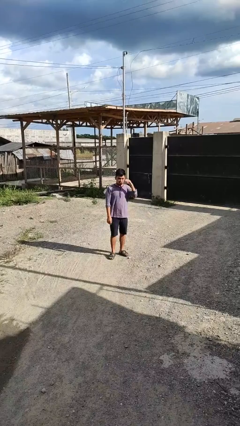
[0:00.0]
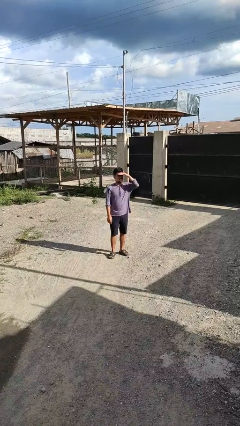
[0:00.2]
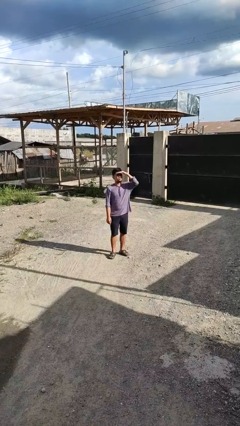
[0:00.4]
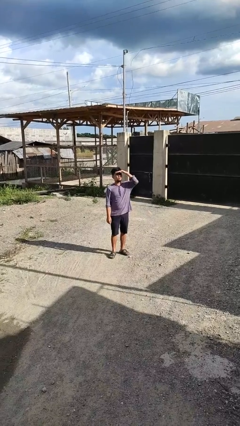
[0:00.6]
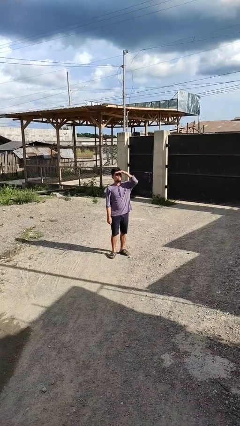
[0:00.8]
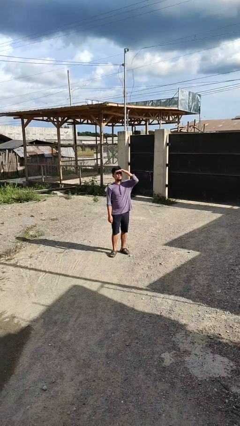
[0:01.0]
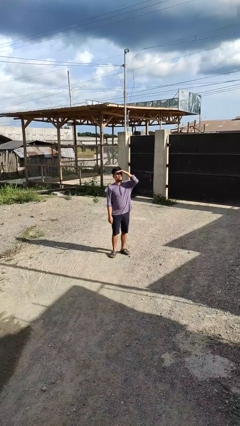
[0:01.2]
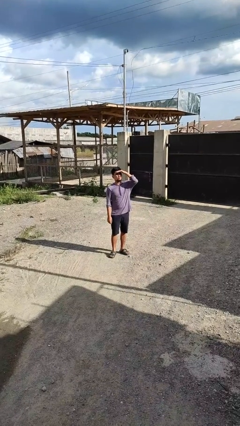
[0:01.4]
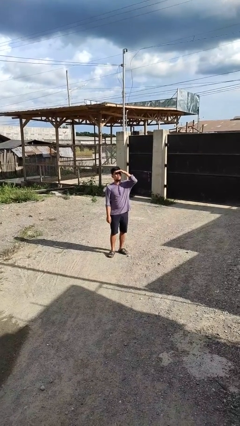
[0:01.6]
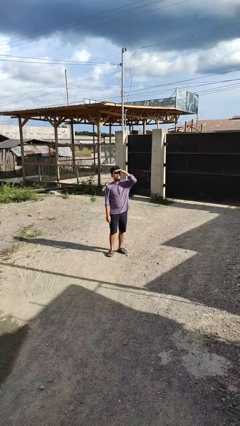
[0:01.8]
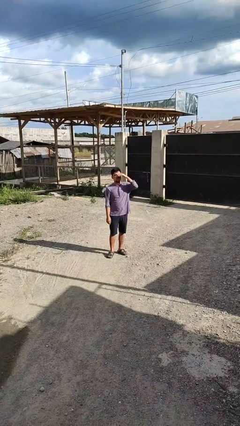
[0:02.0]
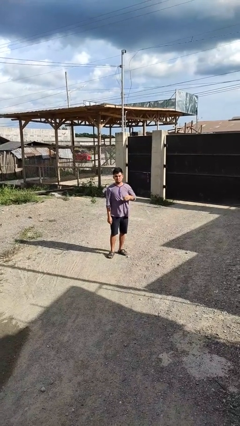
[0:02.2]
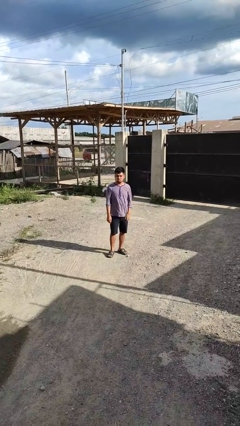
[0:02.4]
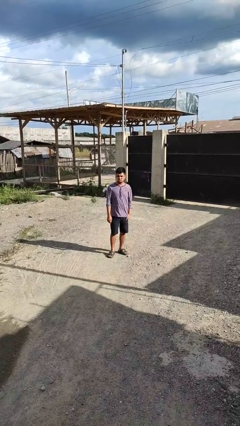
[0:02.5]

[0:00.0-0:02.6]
person shades eyes

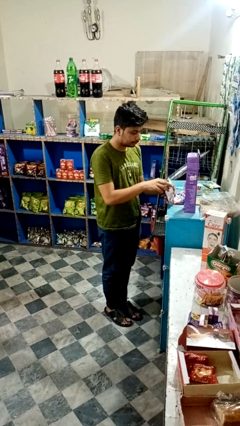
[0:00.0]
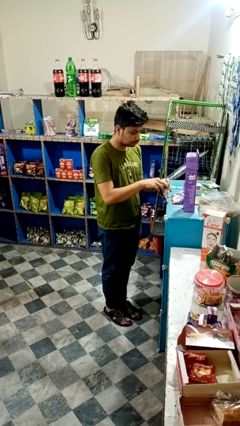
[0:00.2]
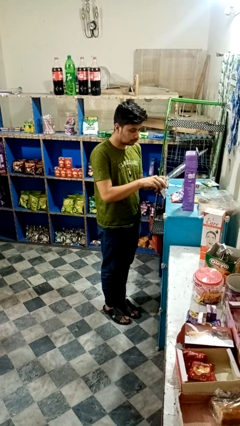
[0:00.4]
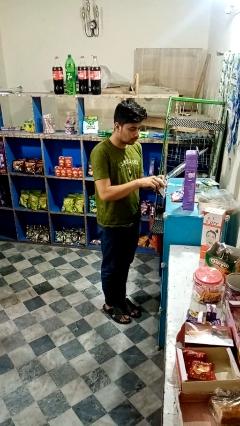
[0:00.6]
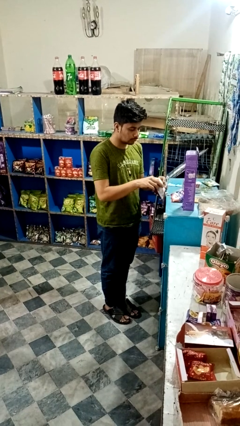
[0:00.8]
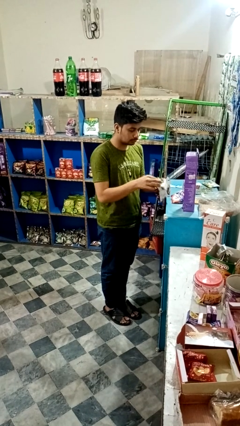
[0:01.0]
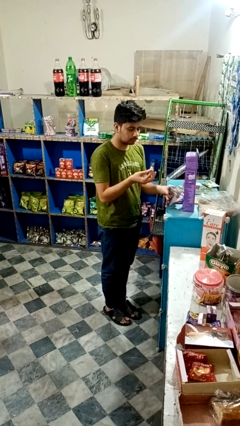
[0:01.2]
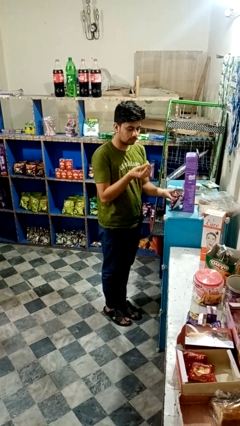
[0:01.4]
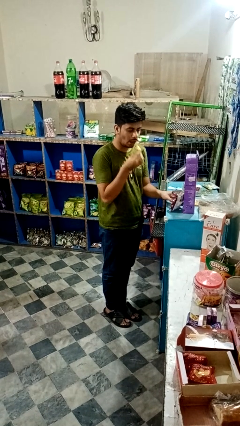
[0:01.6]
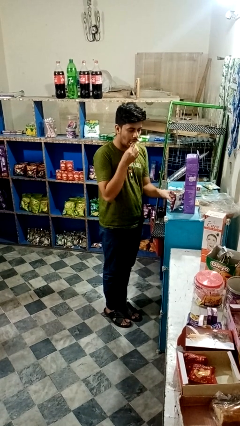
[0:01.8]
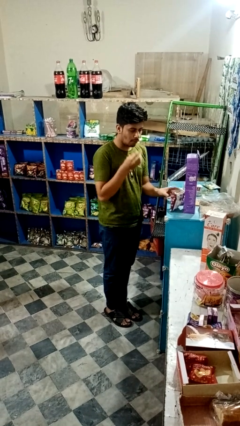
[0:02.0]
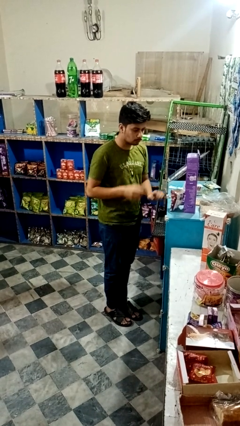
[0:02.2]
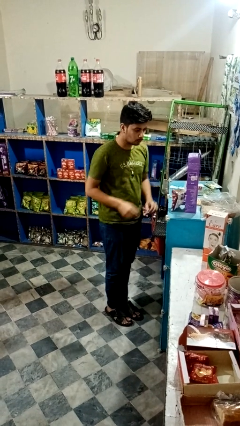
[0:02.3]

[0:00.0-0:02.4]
person eats snack from bag

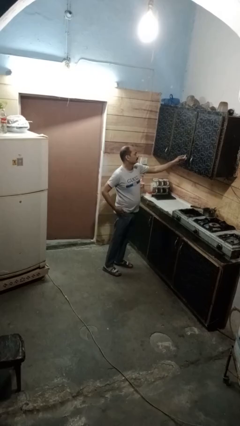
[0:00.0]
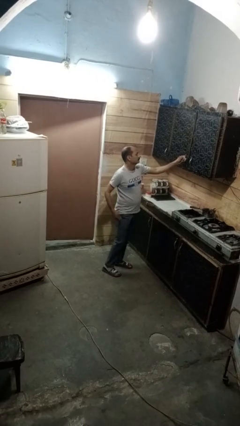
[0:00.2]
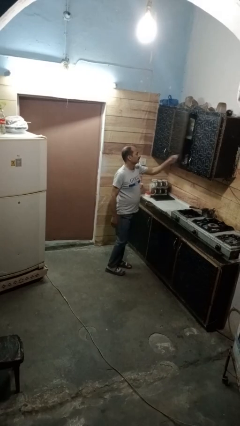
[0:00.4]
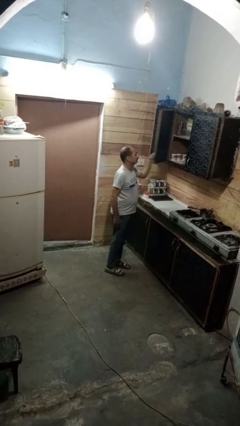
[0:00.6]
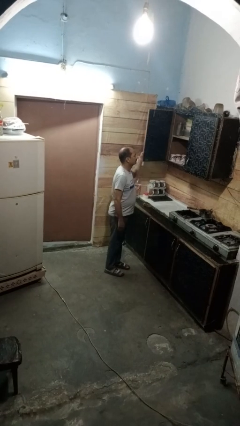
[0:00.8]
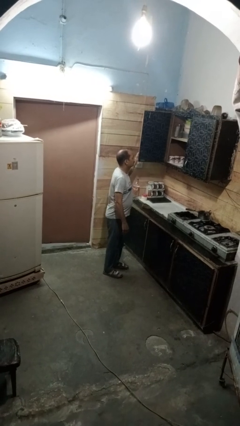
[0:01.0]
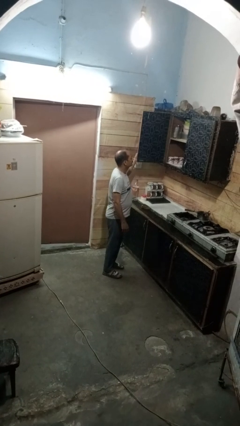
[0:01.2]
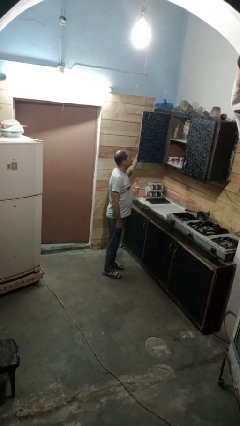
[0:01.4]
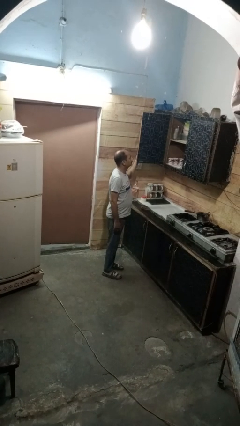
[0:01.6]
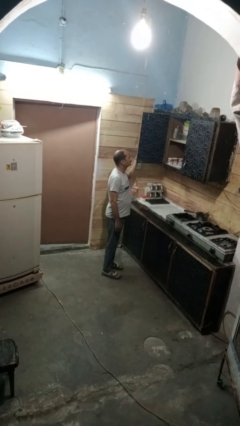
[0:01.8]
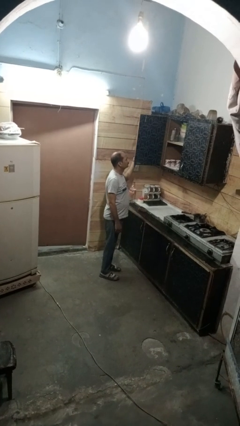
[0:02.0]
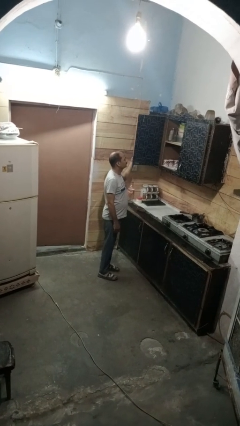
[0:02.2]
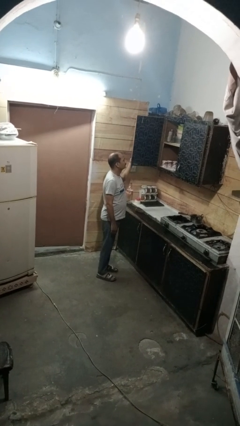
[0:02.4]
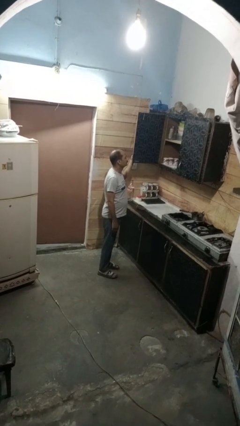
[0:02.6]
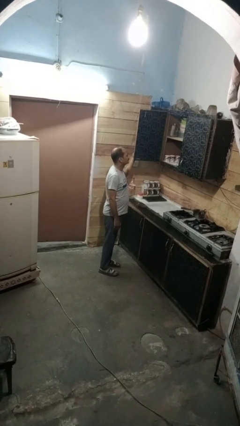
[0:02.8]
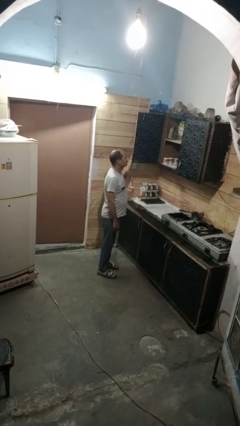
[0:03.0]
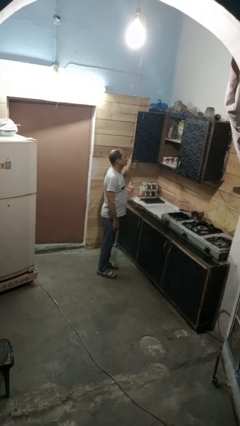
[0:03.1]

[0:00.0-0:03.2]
person opens cabinet

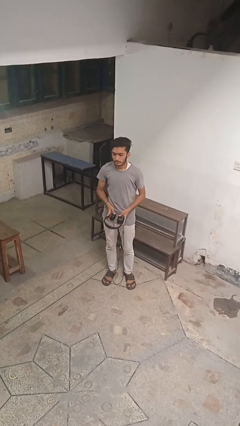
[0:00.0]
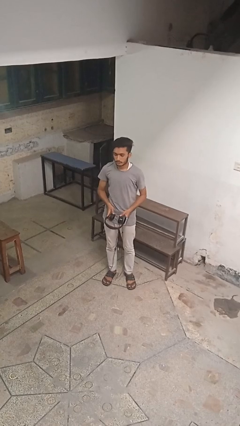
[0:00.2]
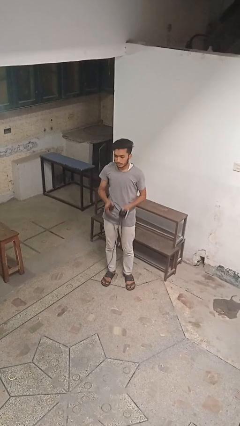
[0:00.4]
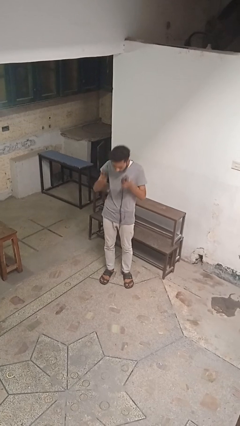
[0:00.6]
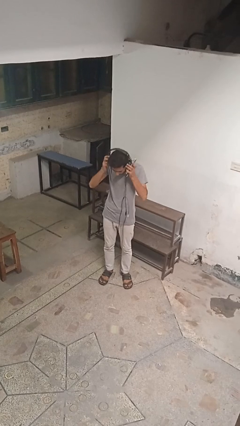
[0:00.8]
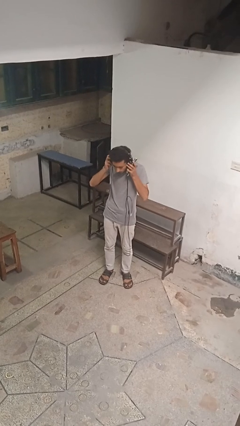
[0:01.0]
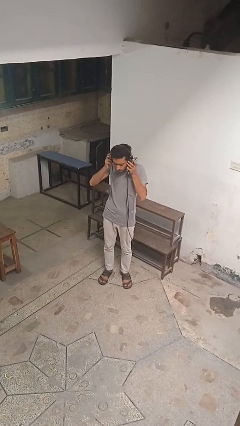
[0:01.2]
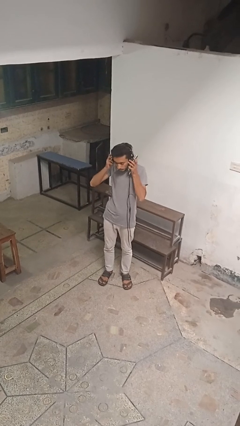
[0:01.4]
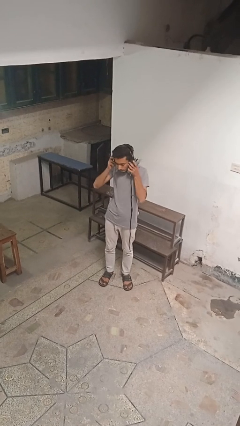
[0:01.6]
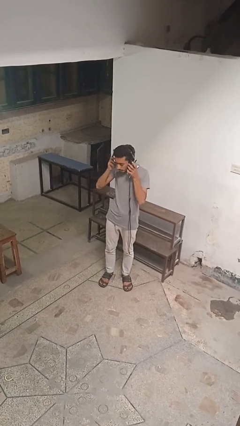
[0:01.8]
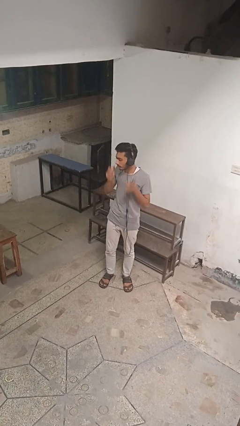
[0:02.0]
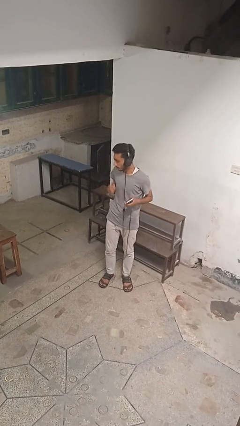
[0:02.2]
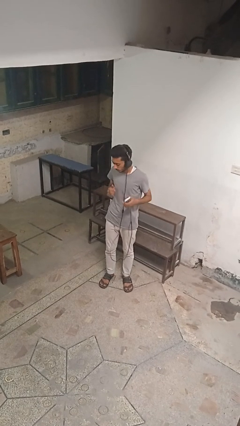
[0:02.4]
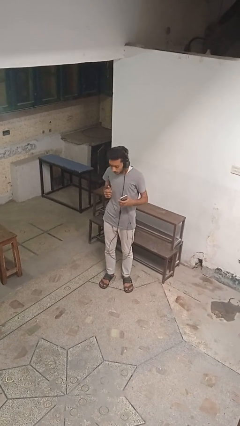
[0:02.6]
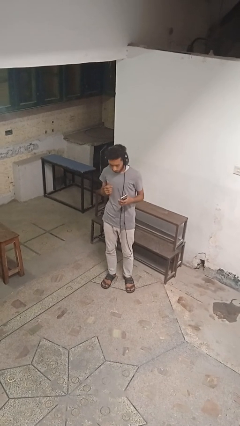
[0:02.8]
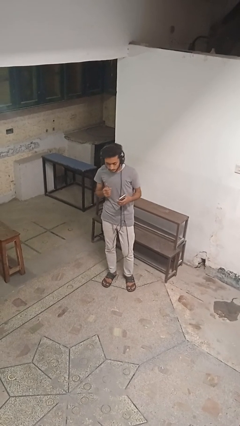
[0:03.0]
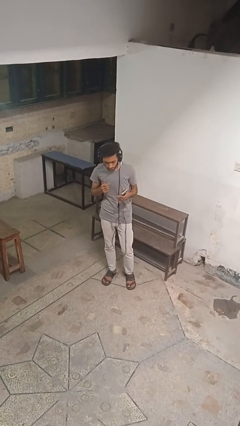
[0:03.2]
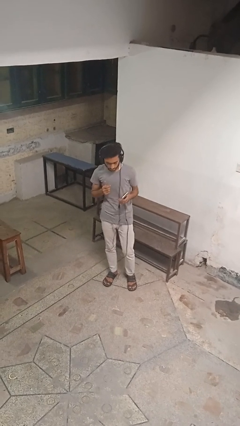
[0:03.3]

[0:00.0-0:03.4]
person puts on headphones

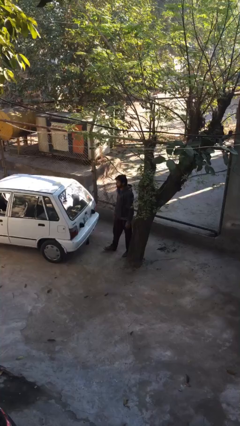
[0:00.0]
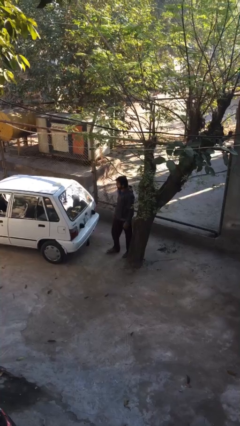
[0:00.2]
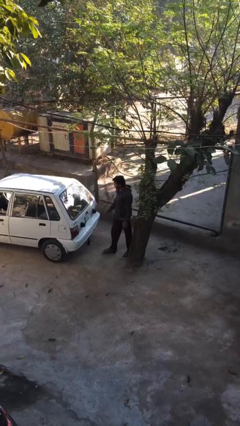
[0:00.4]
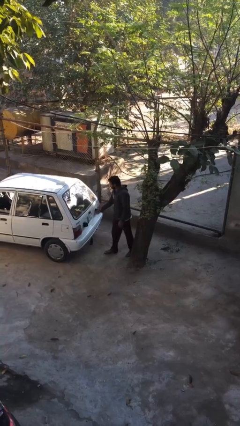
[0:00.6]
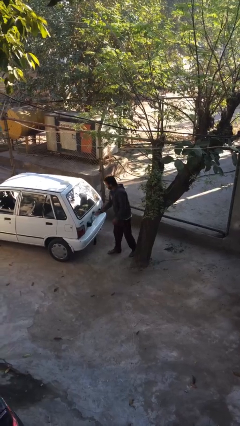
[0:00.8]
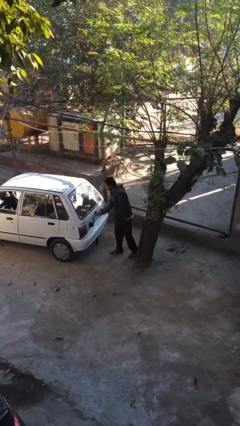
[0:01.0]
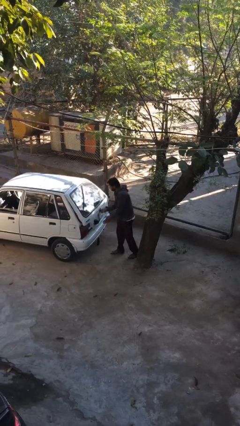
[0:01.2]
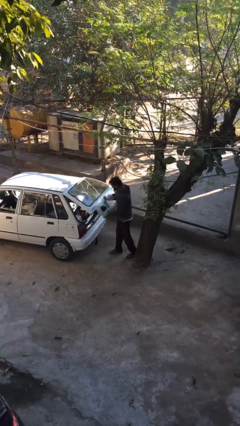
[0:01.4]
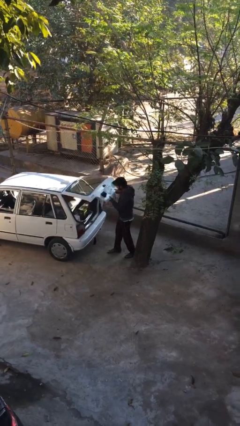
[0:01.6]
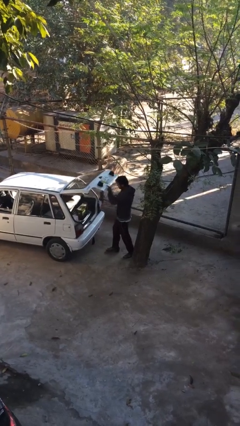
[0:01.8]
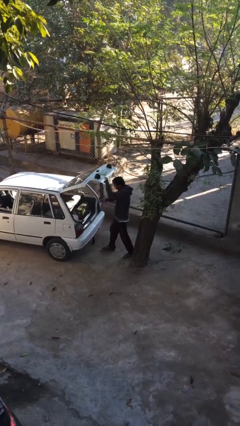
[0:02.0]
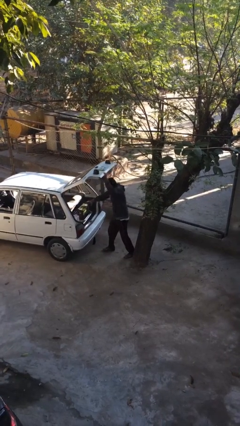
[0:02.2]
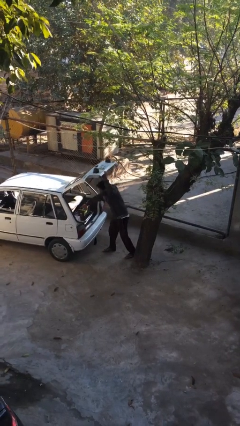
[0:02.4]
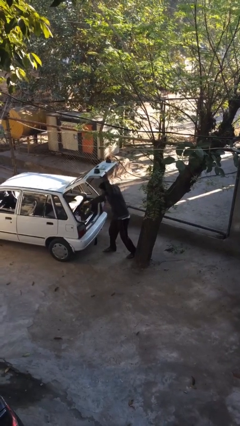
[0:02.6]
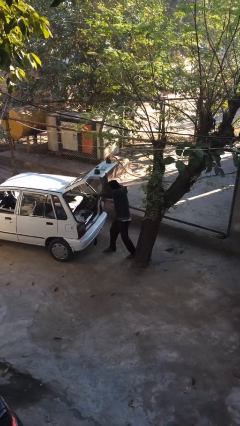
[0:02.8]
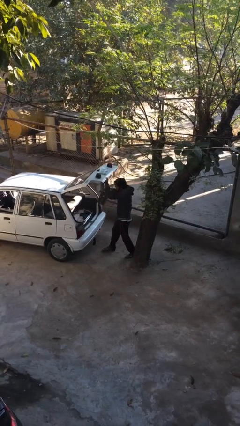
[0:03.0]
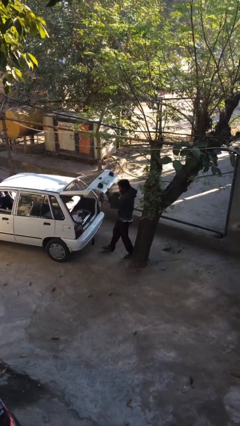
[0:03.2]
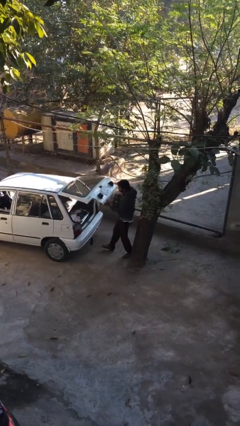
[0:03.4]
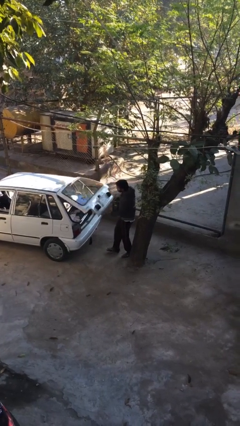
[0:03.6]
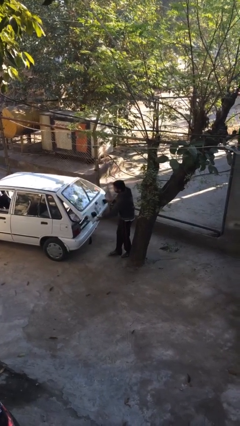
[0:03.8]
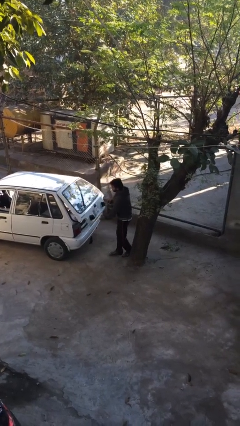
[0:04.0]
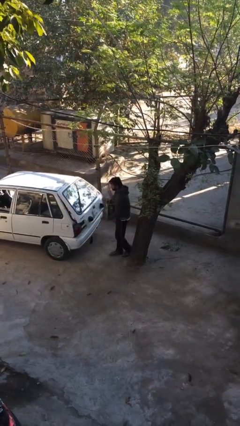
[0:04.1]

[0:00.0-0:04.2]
person unloads car

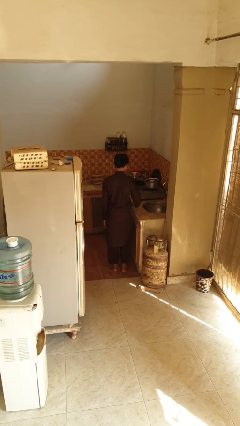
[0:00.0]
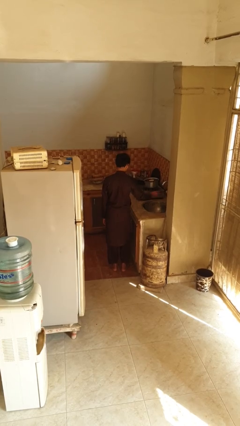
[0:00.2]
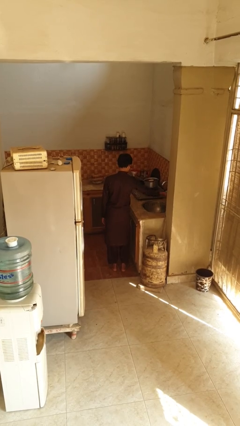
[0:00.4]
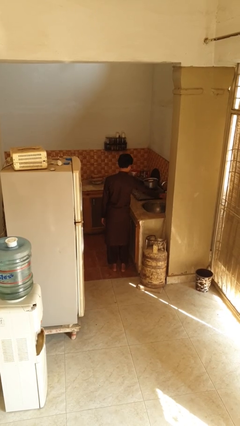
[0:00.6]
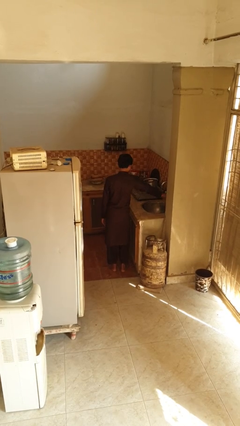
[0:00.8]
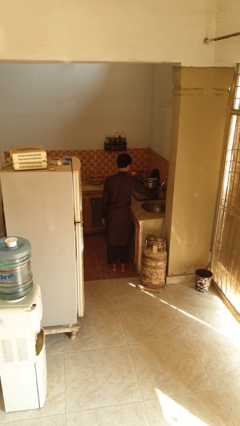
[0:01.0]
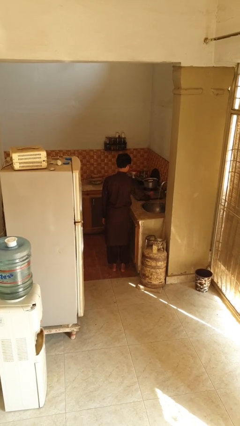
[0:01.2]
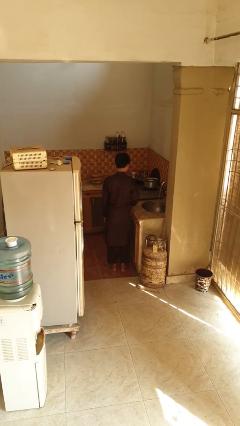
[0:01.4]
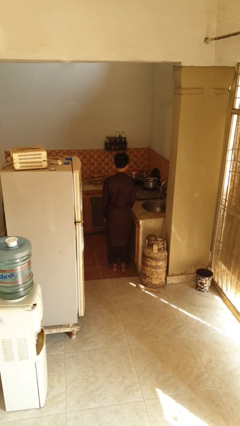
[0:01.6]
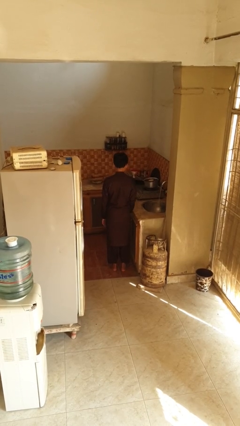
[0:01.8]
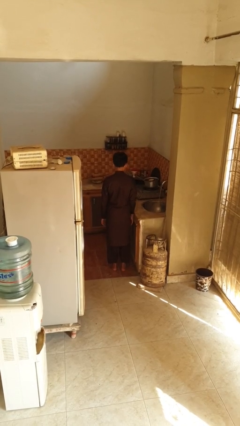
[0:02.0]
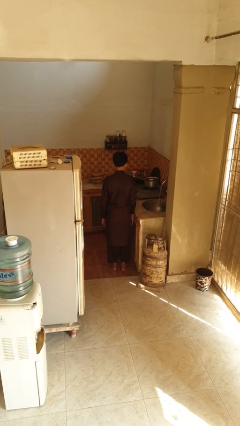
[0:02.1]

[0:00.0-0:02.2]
person turns on faucet
